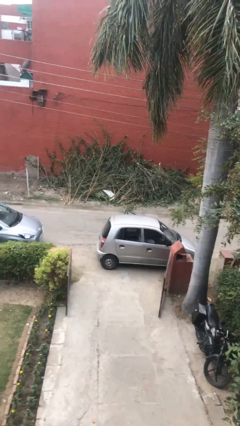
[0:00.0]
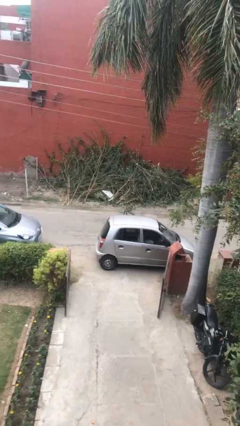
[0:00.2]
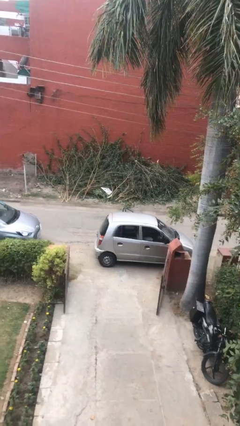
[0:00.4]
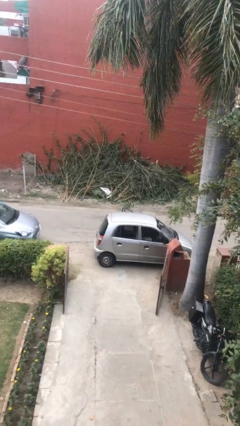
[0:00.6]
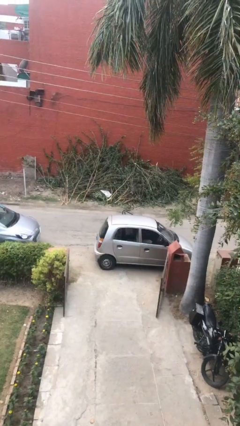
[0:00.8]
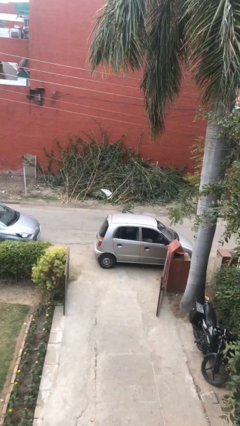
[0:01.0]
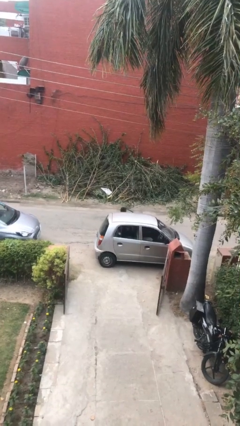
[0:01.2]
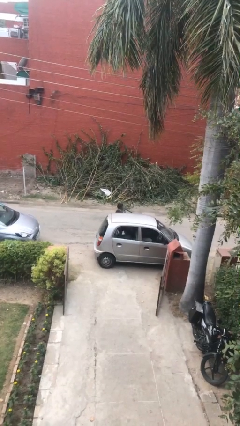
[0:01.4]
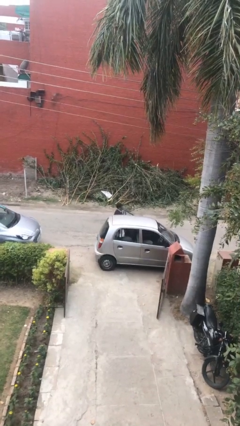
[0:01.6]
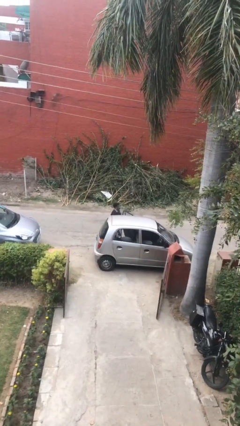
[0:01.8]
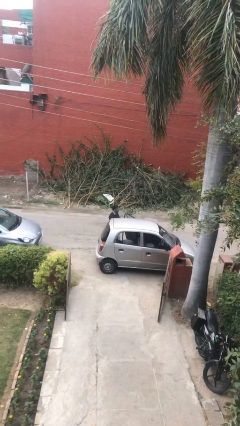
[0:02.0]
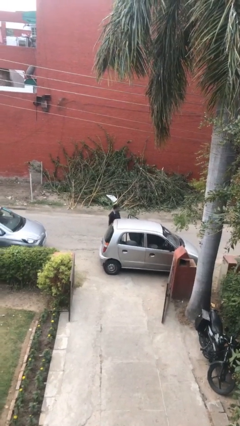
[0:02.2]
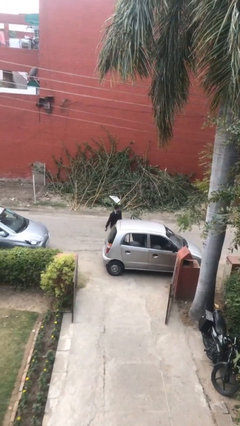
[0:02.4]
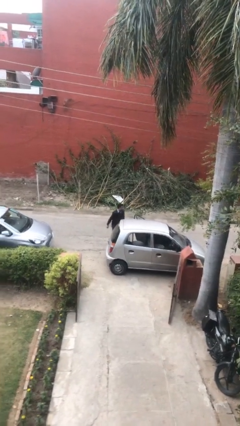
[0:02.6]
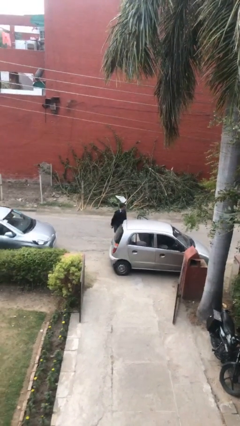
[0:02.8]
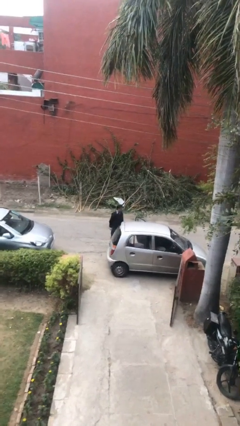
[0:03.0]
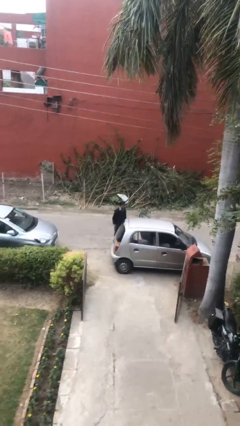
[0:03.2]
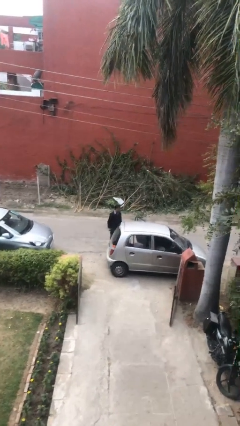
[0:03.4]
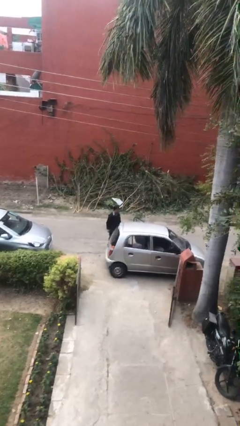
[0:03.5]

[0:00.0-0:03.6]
person exits car

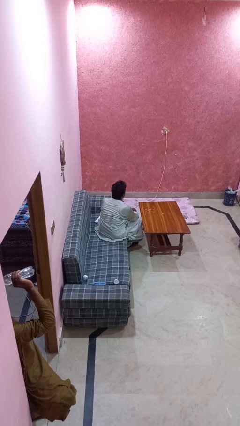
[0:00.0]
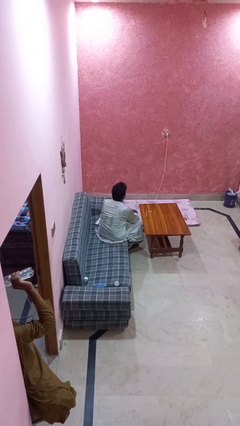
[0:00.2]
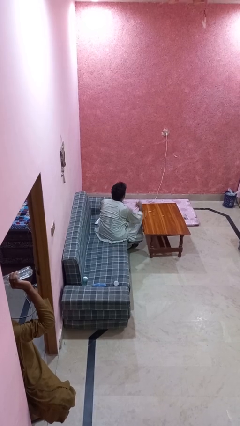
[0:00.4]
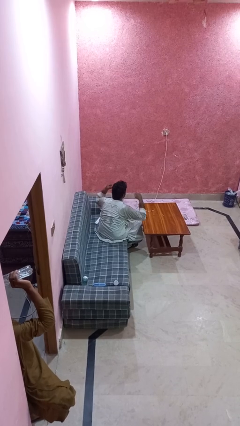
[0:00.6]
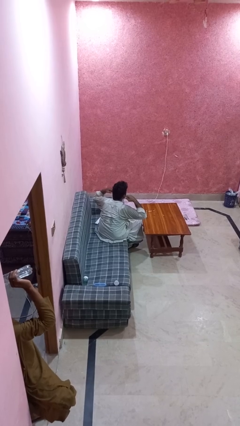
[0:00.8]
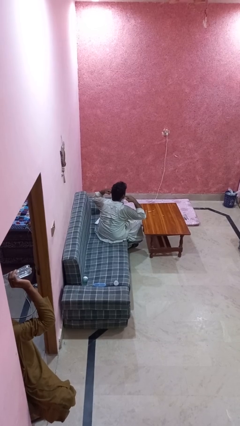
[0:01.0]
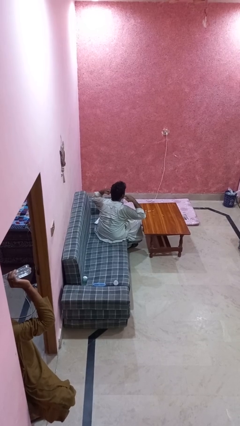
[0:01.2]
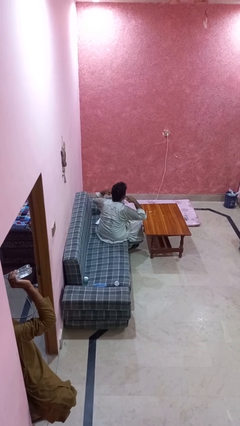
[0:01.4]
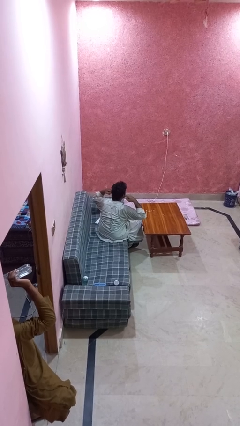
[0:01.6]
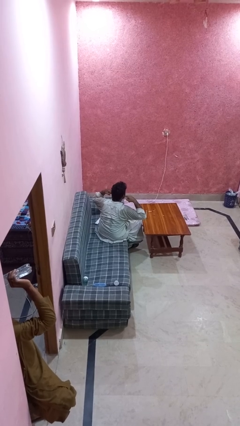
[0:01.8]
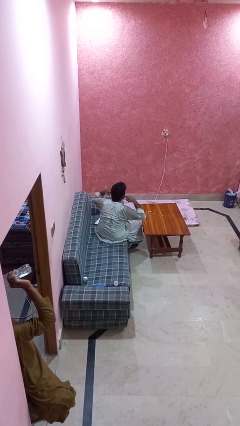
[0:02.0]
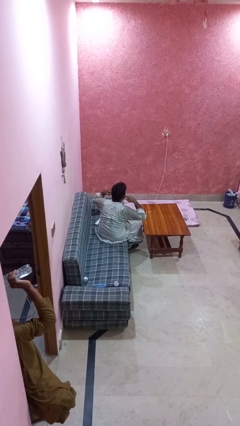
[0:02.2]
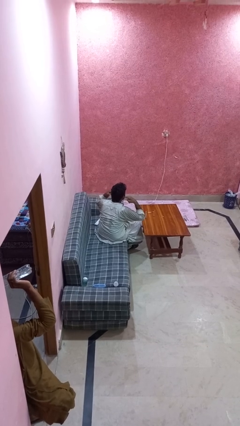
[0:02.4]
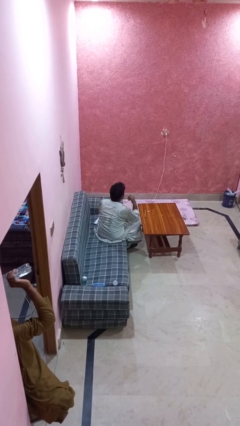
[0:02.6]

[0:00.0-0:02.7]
person puts fingers in ear

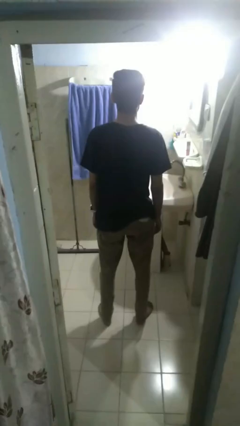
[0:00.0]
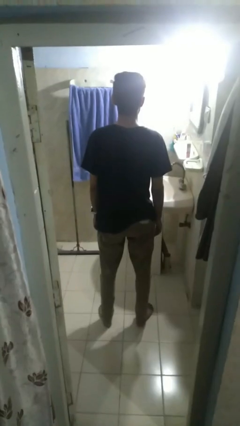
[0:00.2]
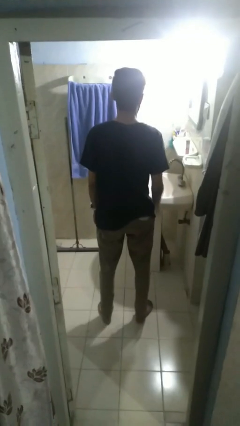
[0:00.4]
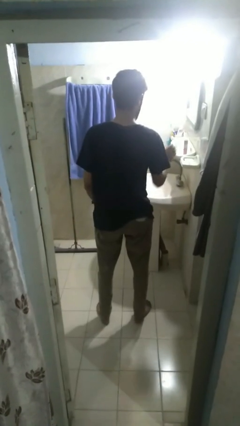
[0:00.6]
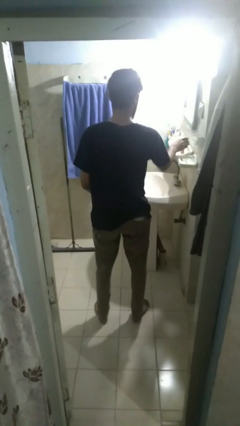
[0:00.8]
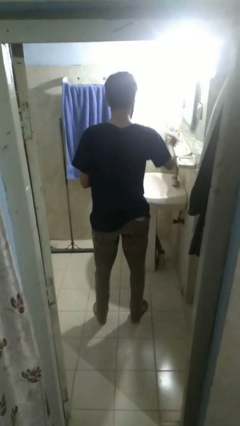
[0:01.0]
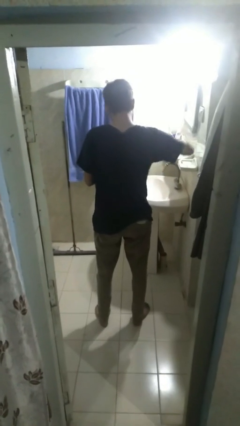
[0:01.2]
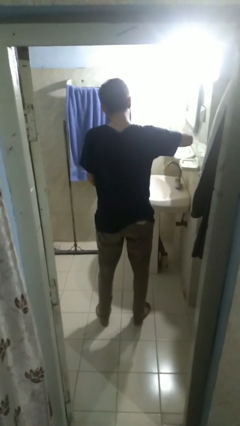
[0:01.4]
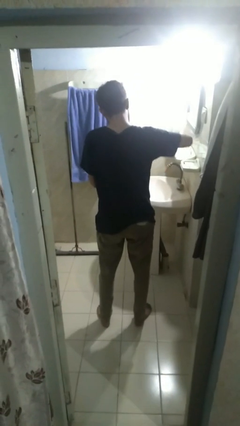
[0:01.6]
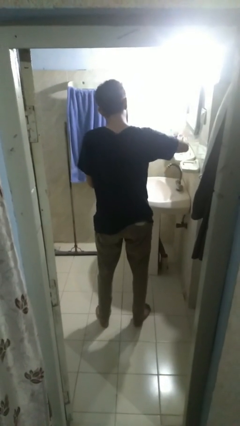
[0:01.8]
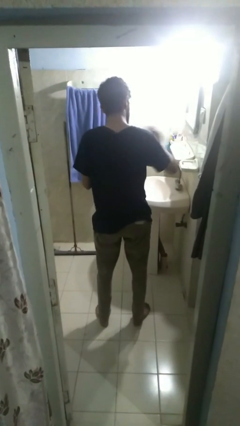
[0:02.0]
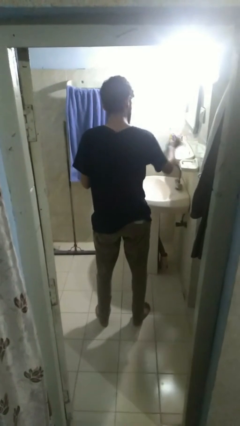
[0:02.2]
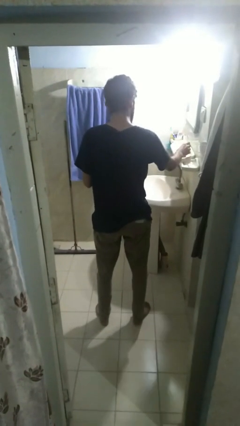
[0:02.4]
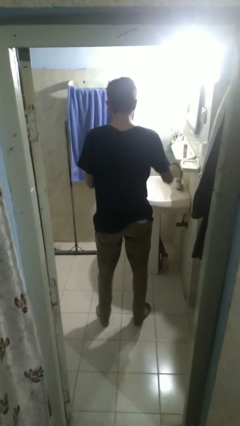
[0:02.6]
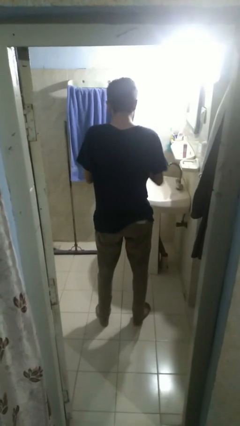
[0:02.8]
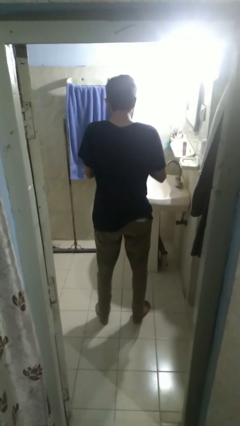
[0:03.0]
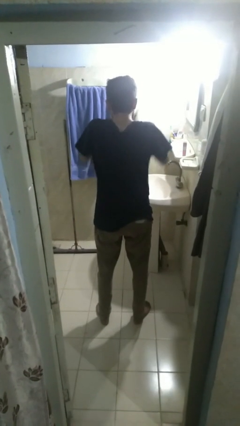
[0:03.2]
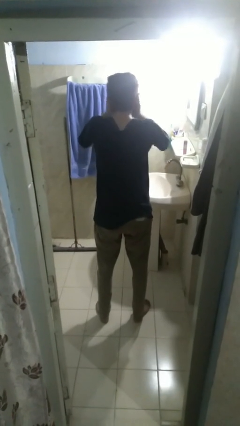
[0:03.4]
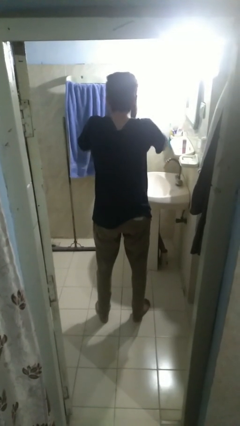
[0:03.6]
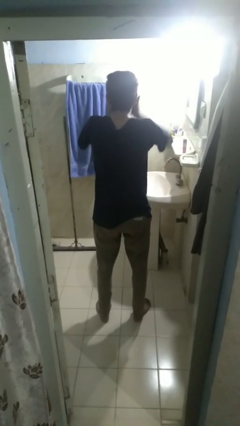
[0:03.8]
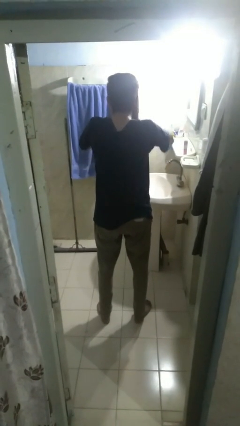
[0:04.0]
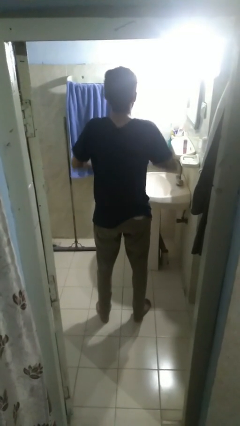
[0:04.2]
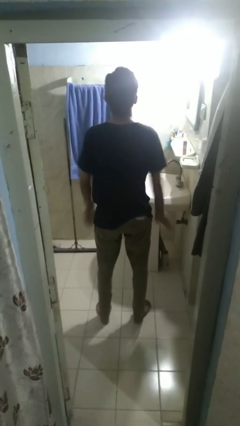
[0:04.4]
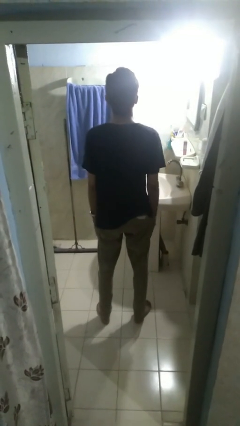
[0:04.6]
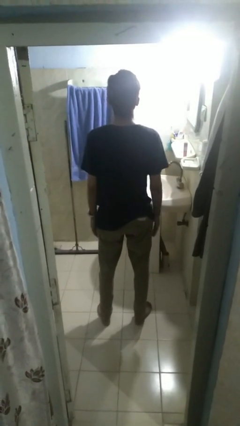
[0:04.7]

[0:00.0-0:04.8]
person applies facial moisturizer

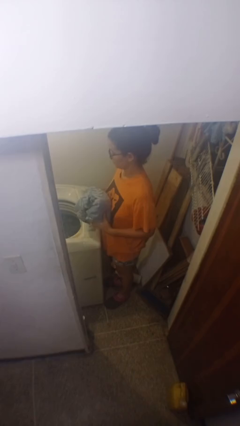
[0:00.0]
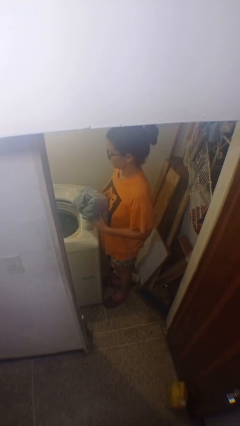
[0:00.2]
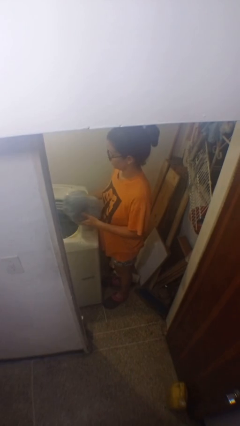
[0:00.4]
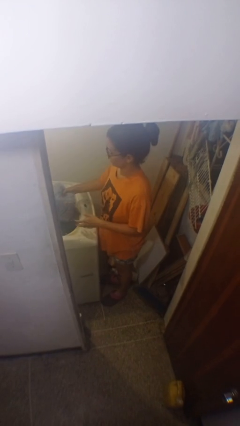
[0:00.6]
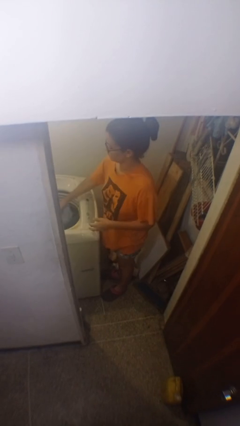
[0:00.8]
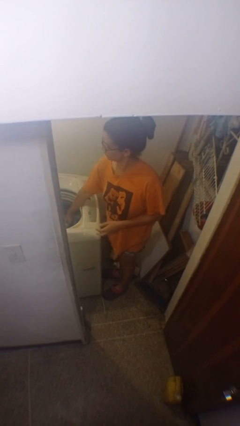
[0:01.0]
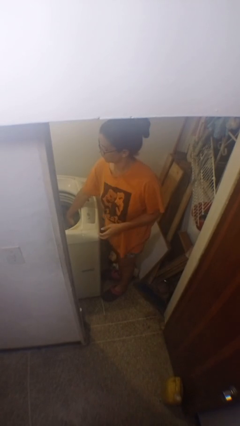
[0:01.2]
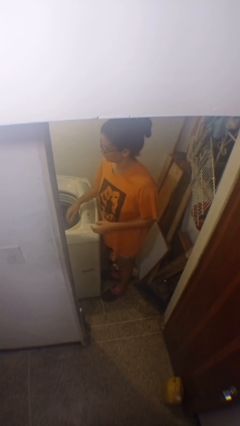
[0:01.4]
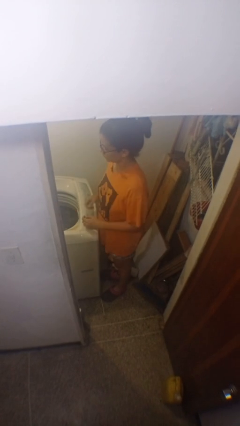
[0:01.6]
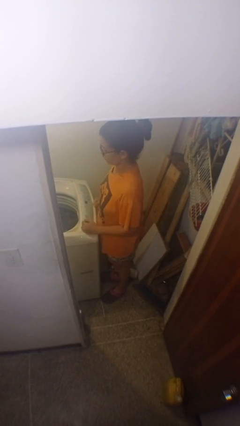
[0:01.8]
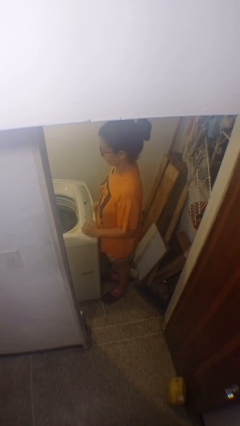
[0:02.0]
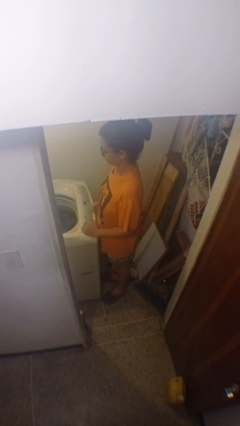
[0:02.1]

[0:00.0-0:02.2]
person loads clotheswasher

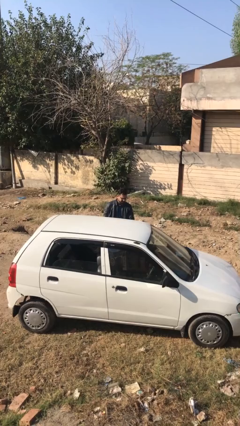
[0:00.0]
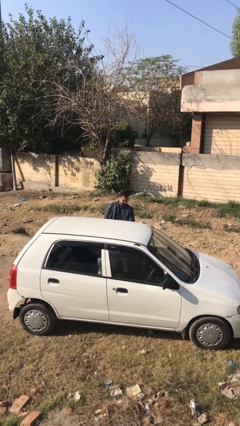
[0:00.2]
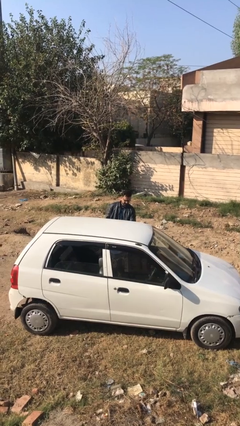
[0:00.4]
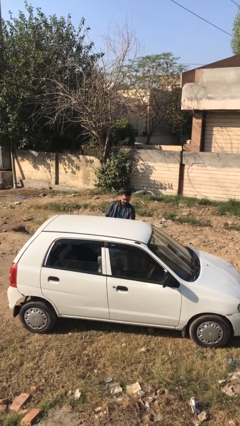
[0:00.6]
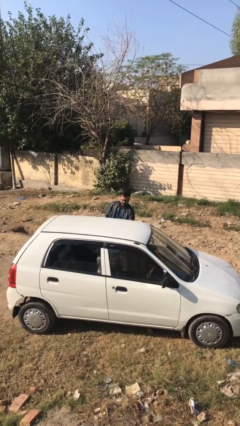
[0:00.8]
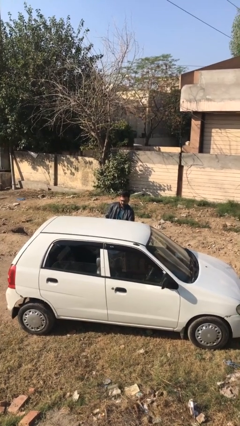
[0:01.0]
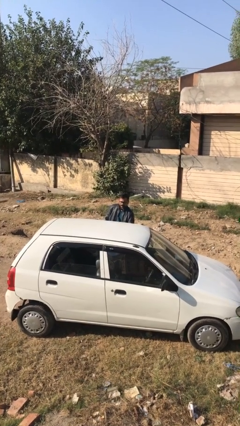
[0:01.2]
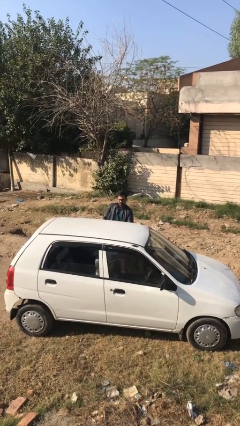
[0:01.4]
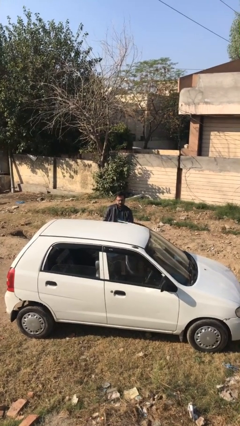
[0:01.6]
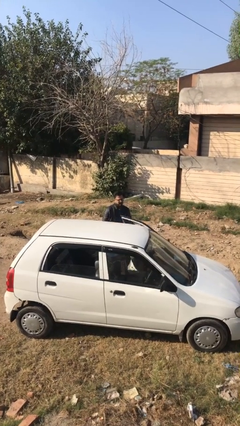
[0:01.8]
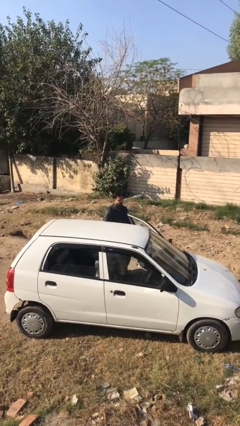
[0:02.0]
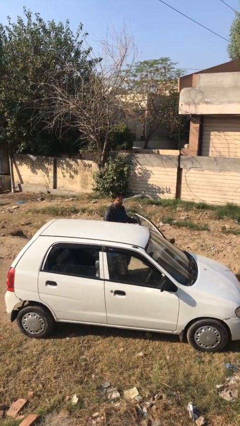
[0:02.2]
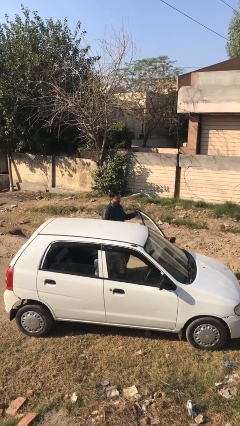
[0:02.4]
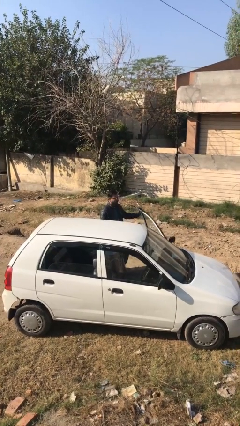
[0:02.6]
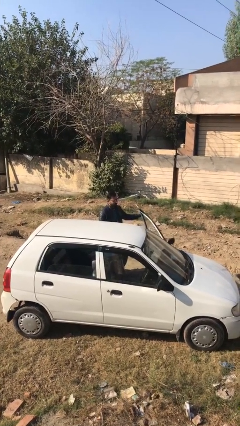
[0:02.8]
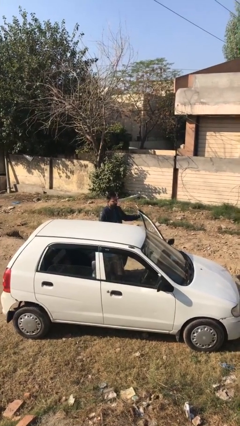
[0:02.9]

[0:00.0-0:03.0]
person opens car door

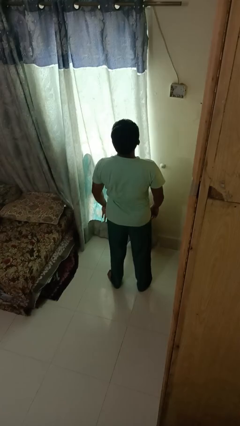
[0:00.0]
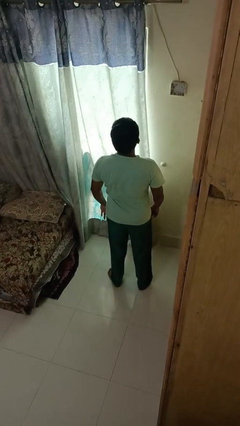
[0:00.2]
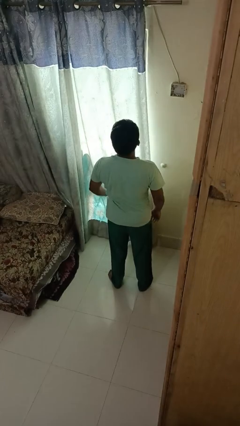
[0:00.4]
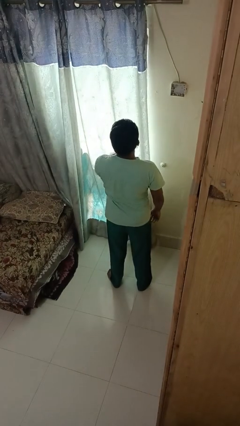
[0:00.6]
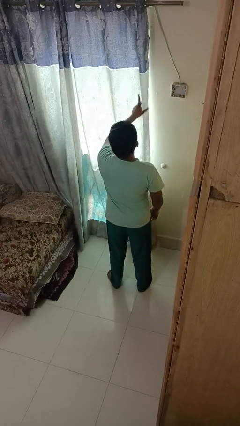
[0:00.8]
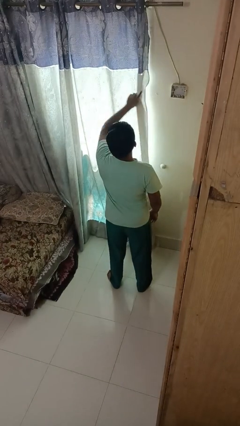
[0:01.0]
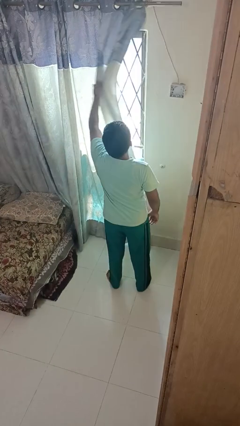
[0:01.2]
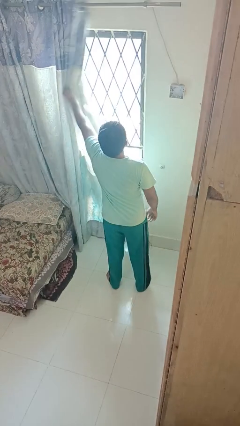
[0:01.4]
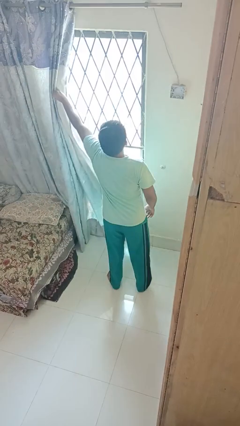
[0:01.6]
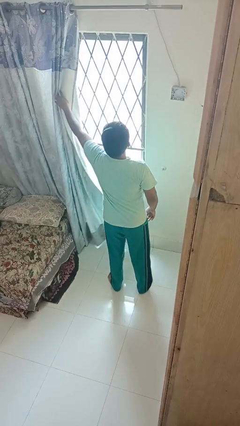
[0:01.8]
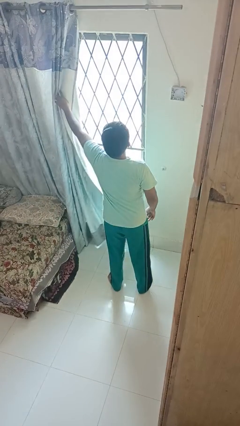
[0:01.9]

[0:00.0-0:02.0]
person opens curtains
